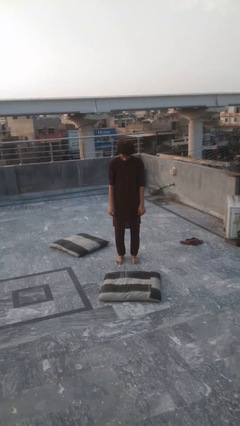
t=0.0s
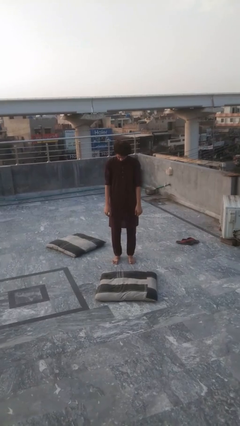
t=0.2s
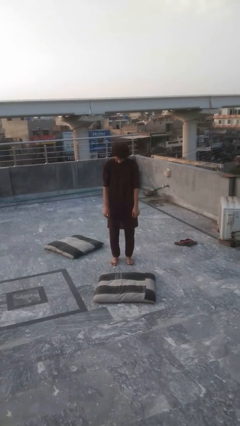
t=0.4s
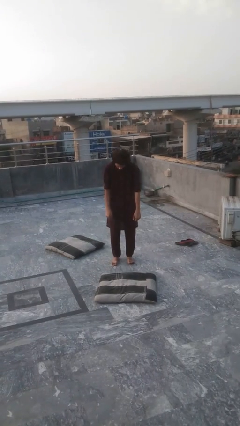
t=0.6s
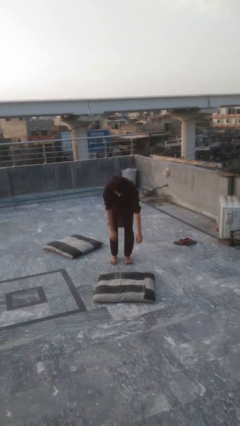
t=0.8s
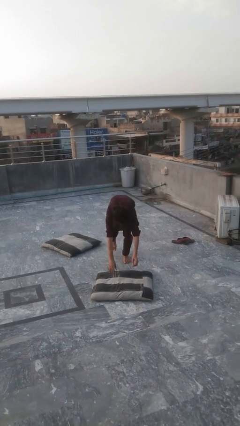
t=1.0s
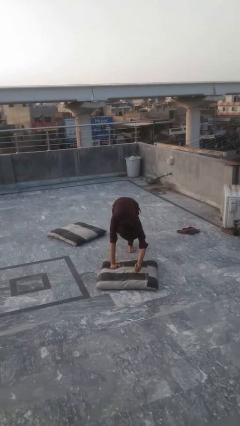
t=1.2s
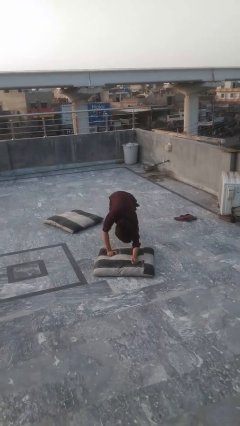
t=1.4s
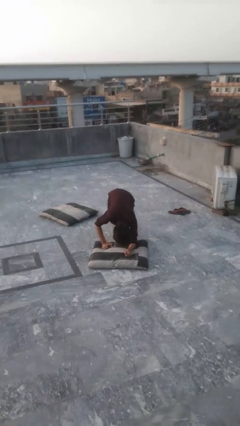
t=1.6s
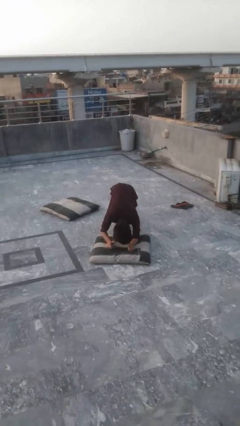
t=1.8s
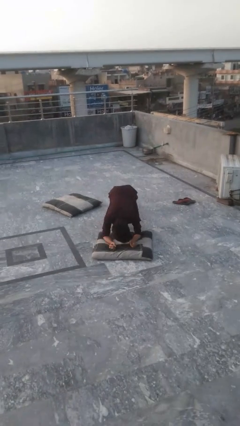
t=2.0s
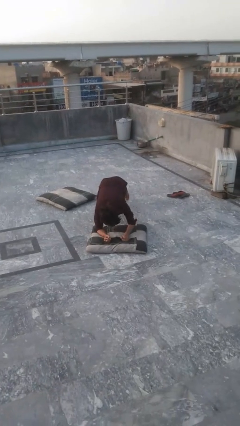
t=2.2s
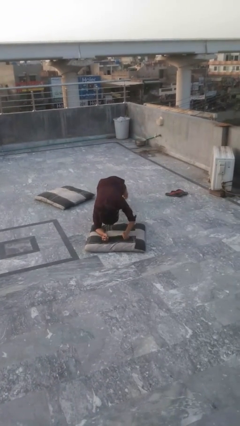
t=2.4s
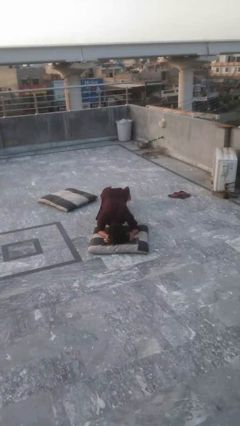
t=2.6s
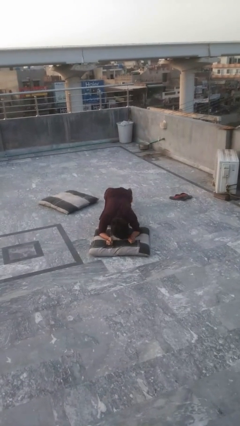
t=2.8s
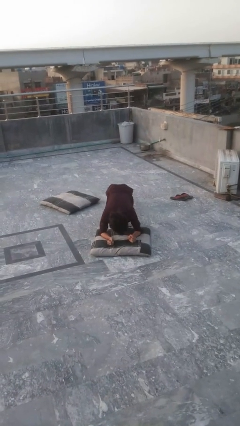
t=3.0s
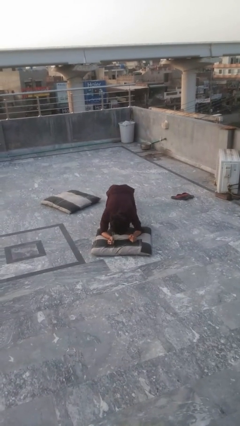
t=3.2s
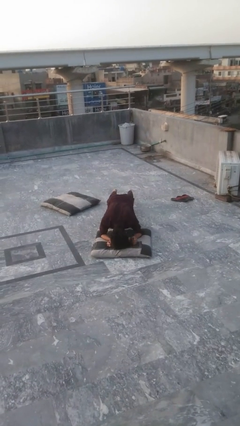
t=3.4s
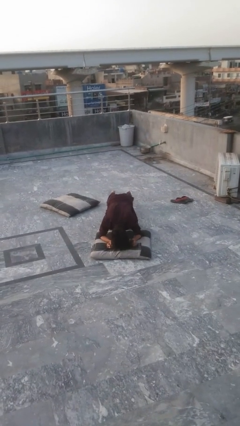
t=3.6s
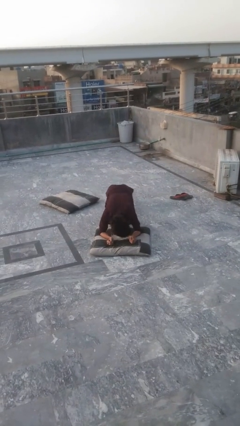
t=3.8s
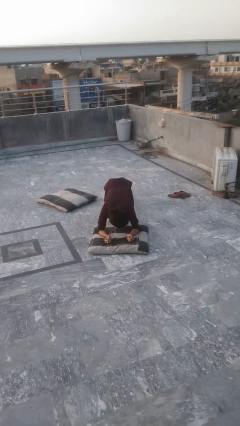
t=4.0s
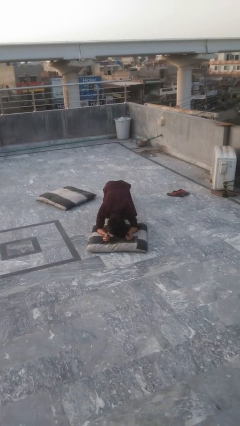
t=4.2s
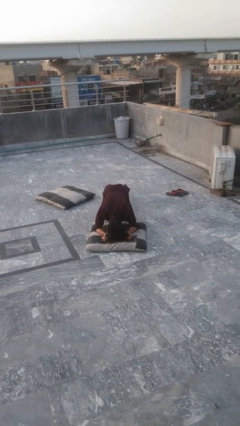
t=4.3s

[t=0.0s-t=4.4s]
person exercises with plank

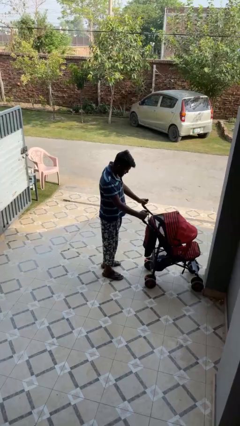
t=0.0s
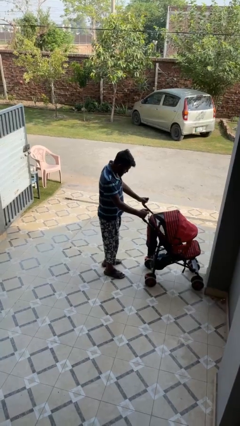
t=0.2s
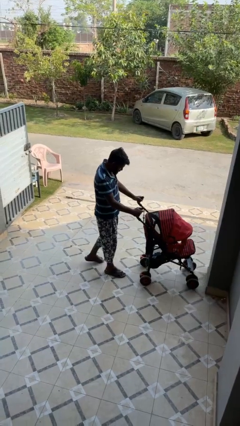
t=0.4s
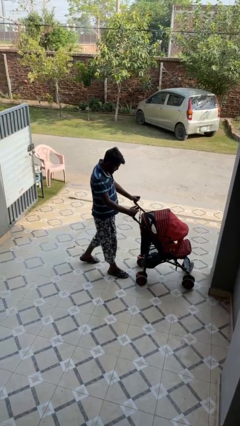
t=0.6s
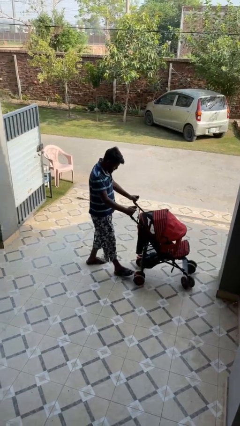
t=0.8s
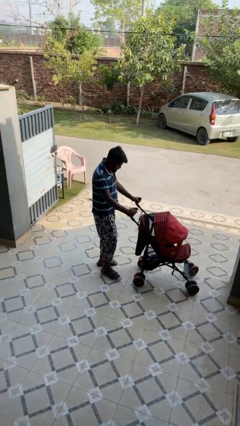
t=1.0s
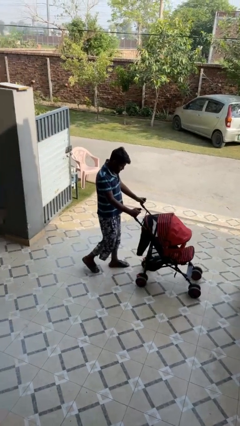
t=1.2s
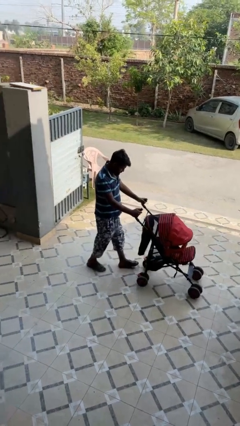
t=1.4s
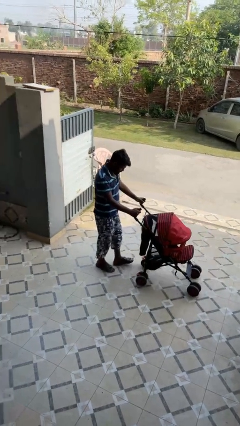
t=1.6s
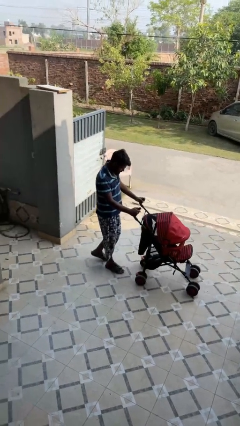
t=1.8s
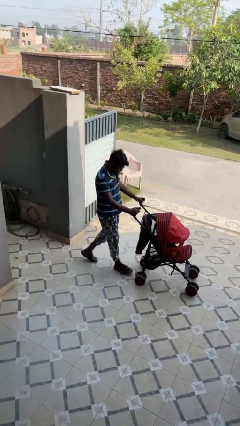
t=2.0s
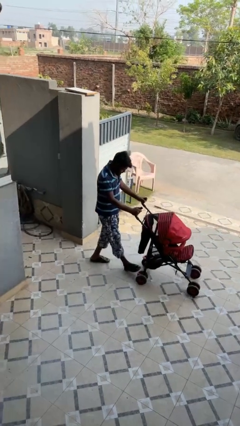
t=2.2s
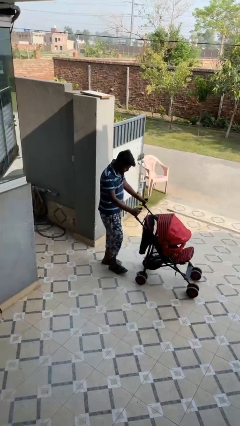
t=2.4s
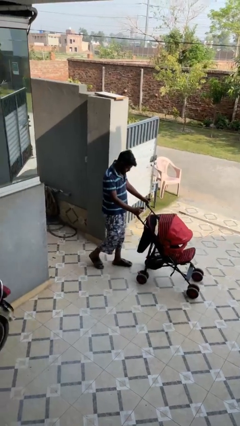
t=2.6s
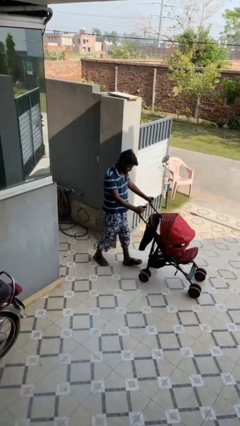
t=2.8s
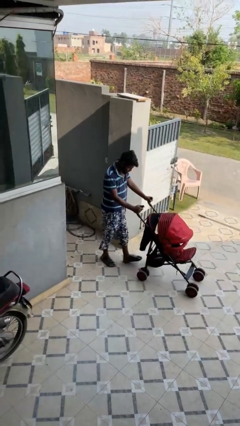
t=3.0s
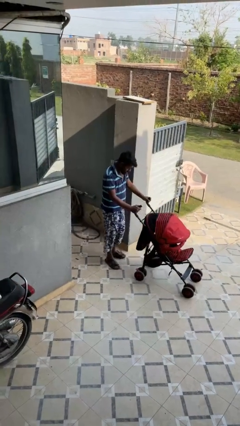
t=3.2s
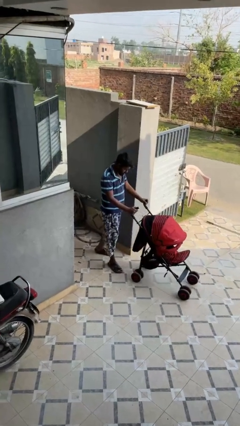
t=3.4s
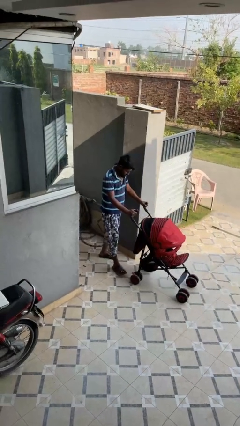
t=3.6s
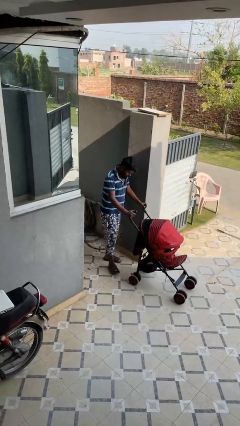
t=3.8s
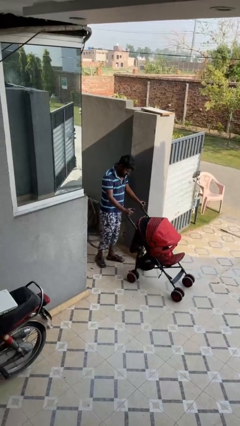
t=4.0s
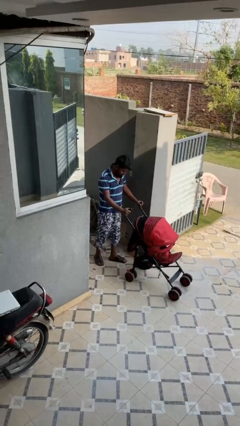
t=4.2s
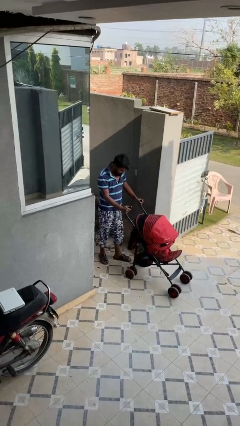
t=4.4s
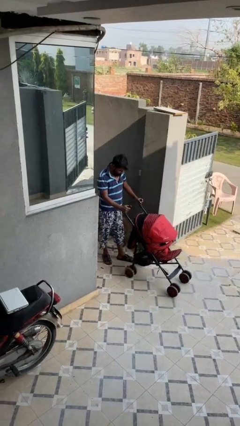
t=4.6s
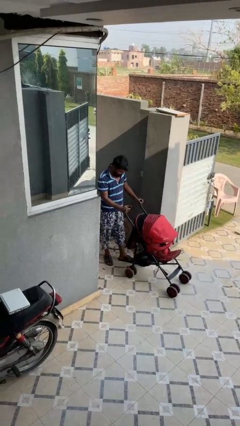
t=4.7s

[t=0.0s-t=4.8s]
person pulls wheeled cart

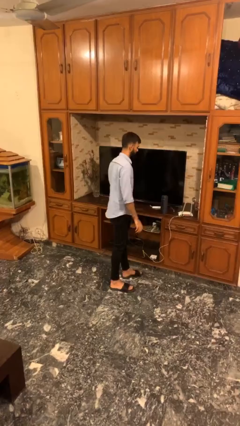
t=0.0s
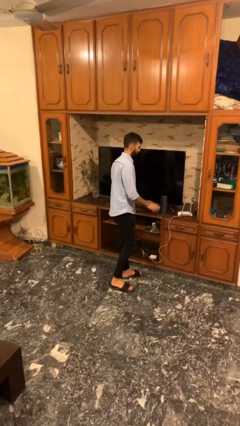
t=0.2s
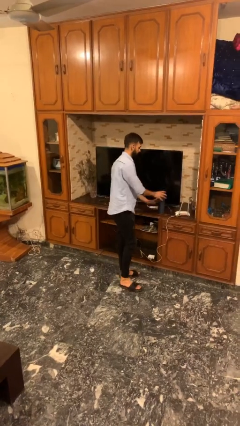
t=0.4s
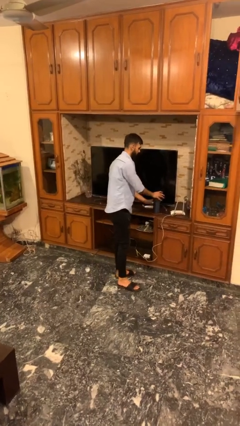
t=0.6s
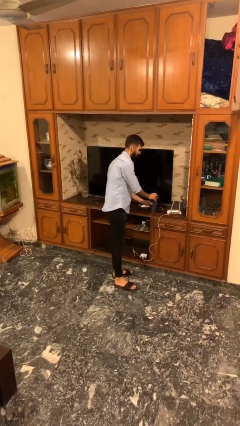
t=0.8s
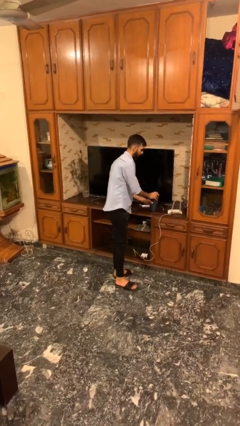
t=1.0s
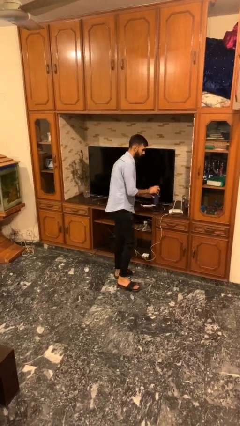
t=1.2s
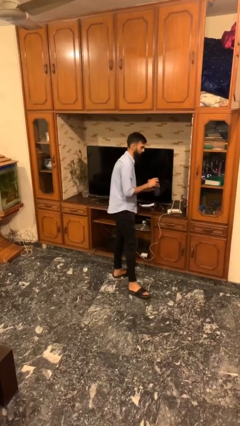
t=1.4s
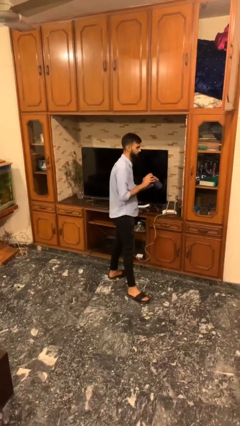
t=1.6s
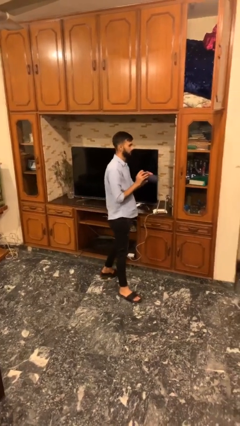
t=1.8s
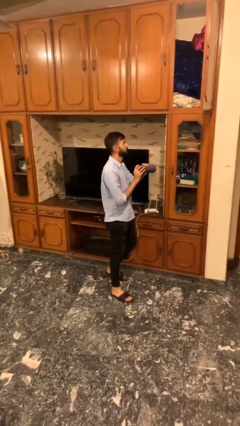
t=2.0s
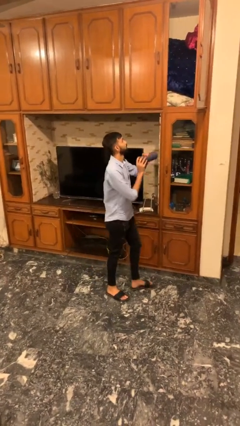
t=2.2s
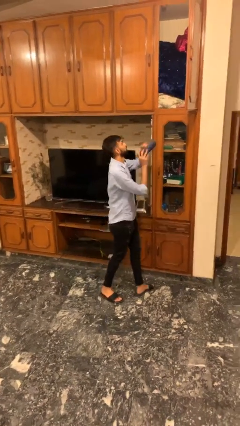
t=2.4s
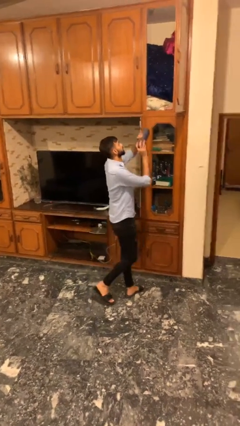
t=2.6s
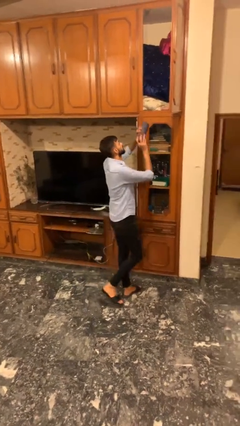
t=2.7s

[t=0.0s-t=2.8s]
person picks up object from table

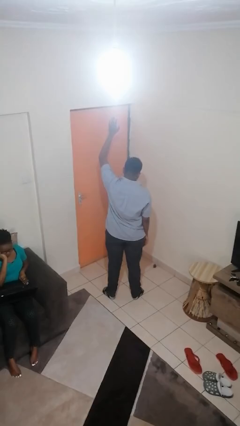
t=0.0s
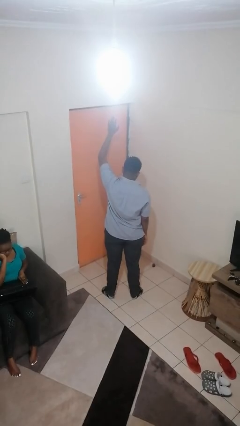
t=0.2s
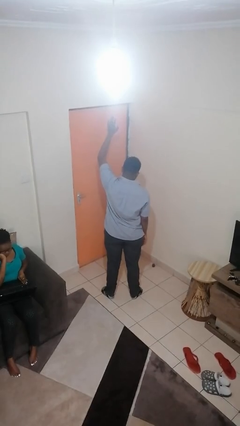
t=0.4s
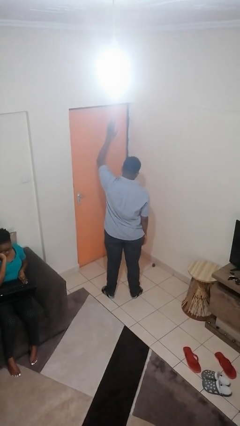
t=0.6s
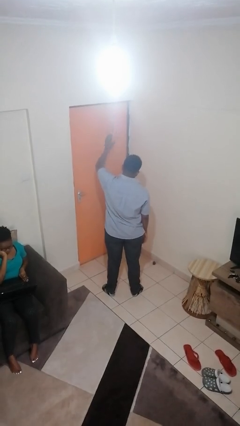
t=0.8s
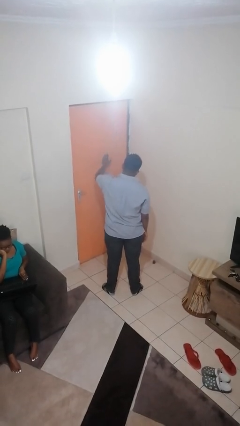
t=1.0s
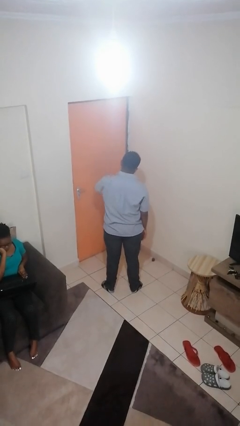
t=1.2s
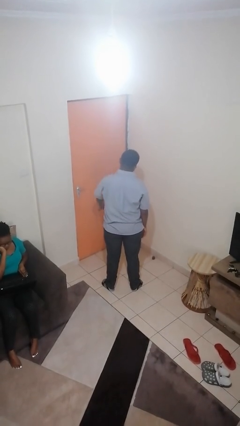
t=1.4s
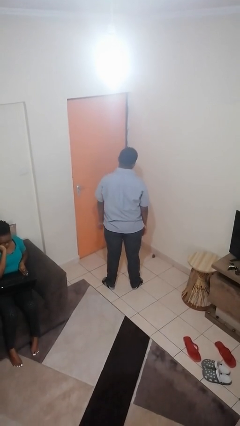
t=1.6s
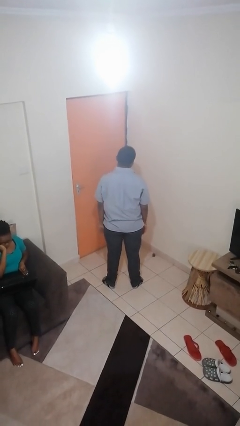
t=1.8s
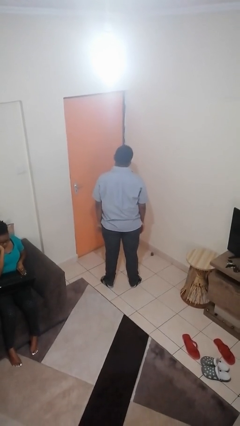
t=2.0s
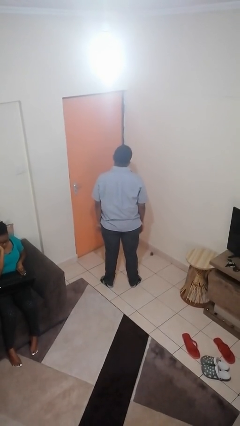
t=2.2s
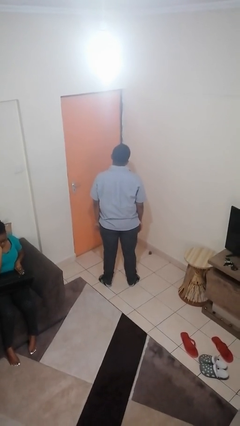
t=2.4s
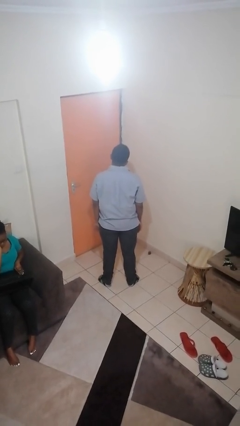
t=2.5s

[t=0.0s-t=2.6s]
person gestures lower hand

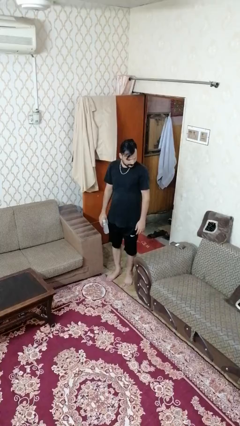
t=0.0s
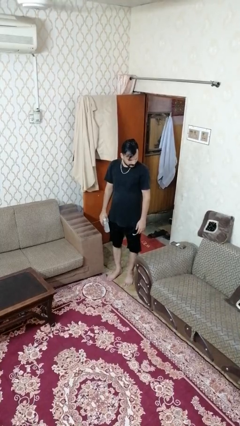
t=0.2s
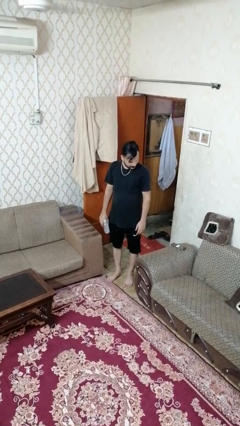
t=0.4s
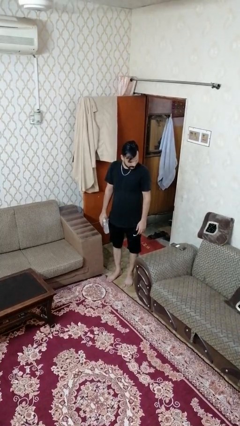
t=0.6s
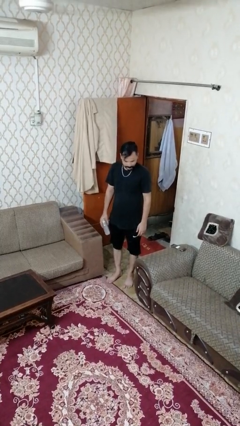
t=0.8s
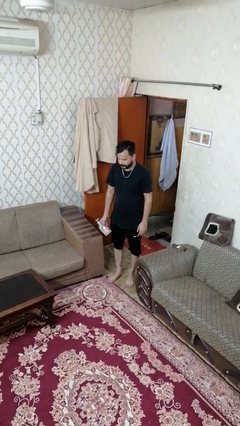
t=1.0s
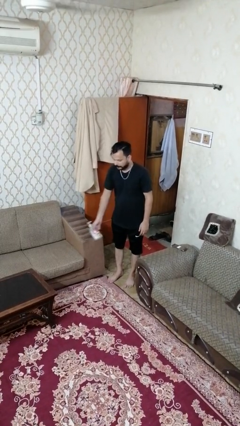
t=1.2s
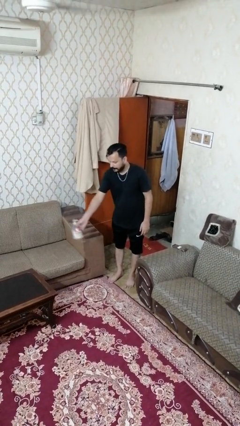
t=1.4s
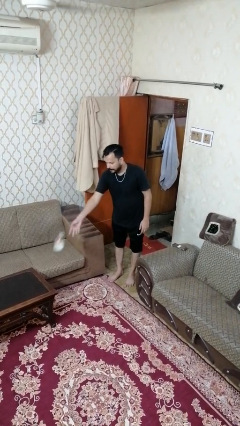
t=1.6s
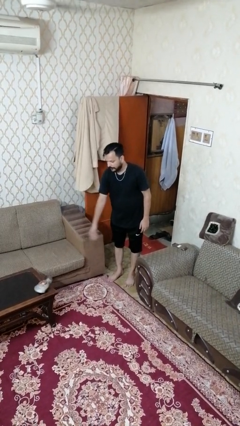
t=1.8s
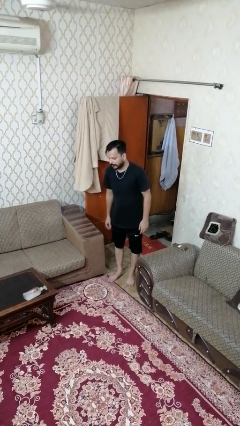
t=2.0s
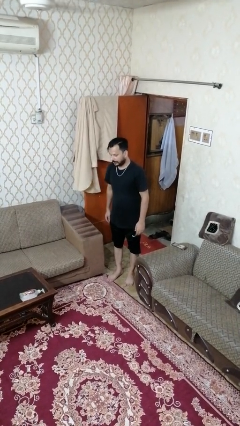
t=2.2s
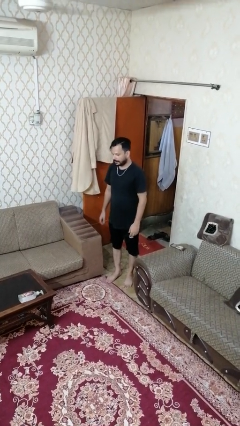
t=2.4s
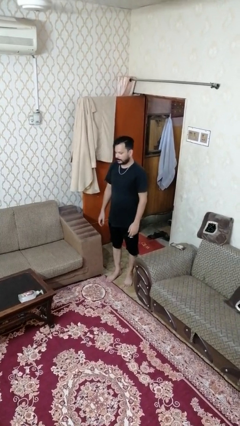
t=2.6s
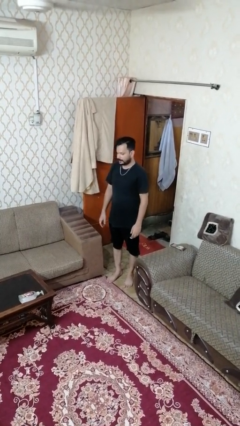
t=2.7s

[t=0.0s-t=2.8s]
person throws object on table

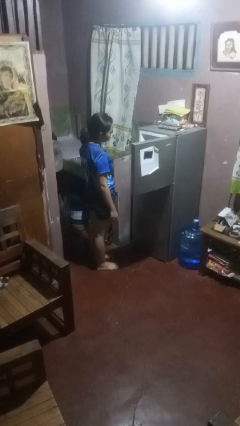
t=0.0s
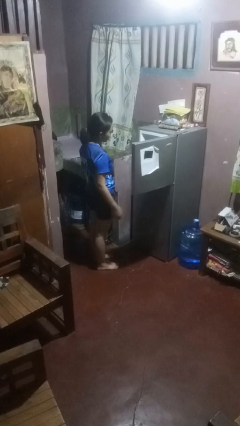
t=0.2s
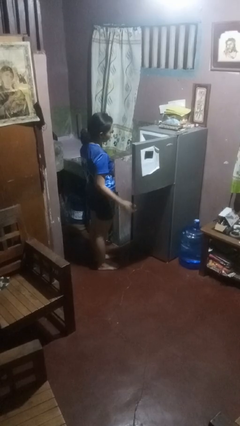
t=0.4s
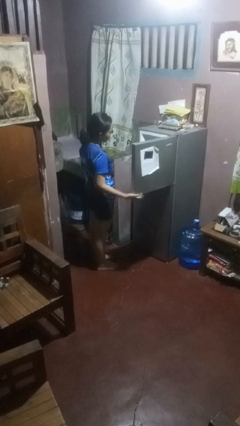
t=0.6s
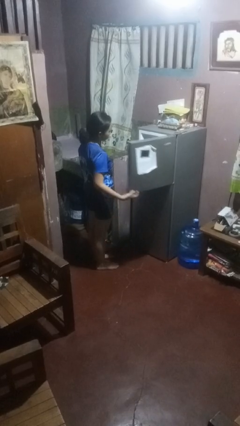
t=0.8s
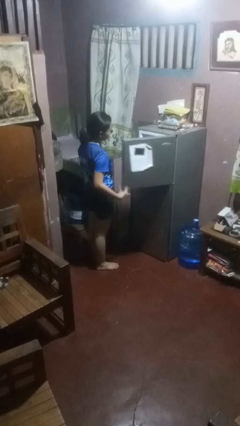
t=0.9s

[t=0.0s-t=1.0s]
person closes refrigerator
